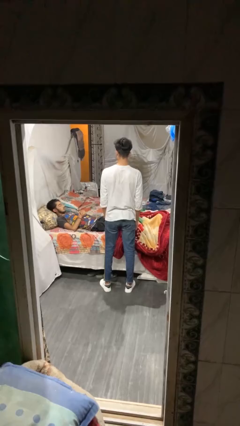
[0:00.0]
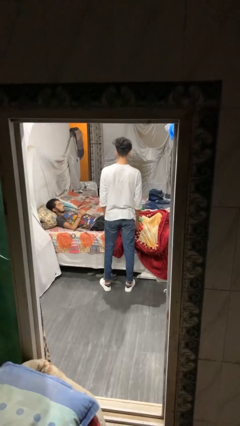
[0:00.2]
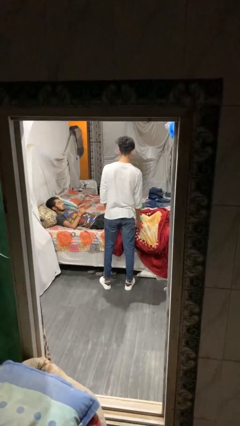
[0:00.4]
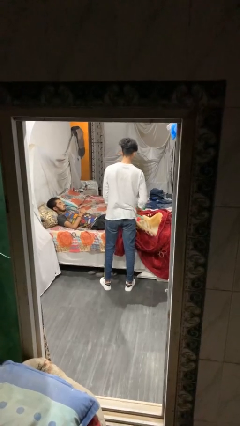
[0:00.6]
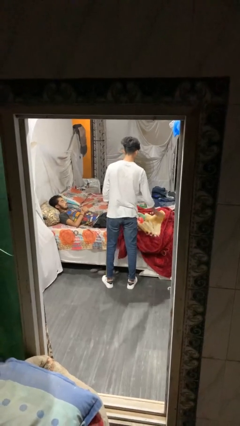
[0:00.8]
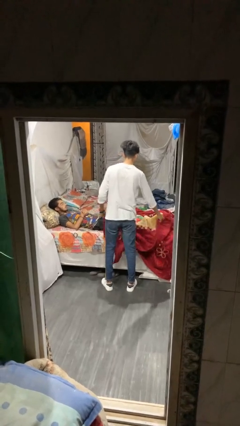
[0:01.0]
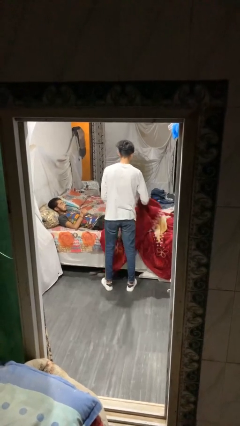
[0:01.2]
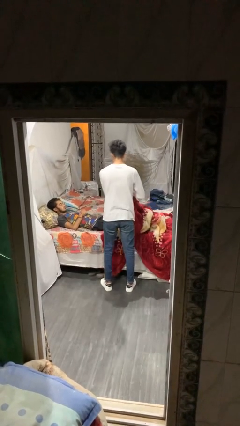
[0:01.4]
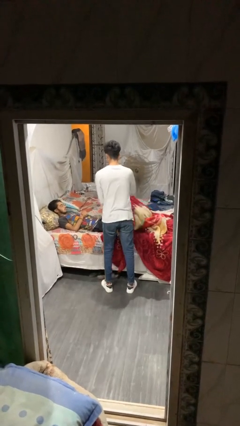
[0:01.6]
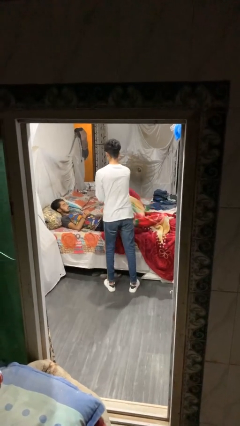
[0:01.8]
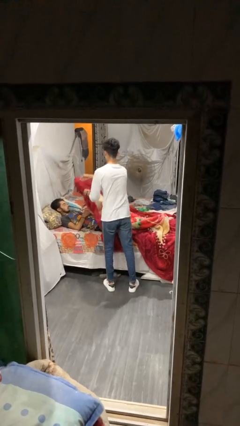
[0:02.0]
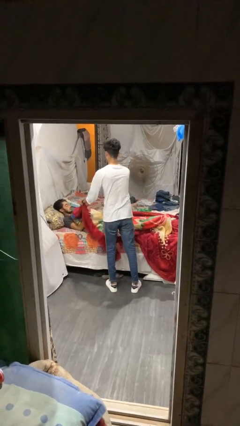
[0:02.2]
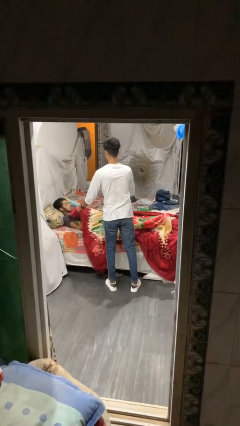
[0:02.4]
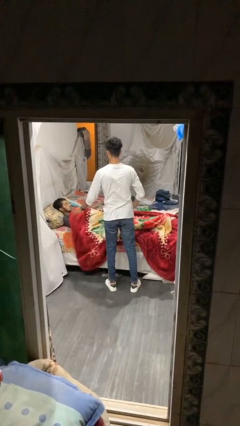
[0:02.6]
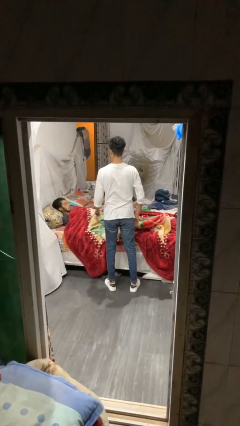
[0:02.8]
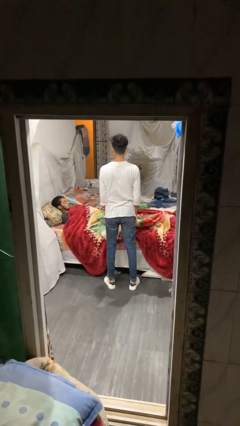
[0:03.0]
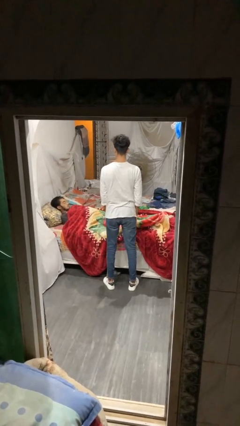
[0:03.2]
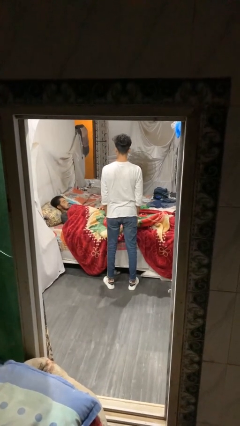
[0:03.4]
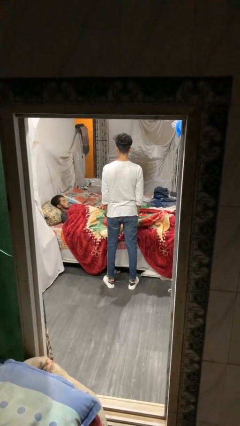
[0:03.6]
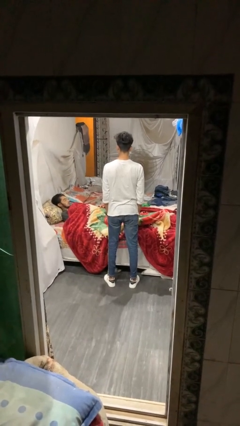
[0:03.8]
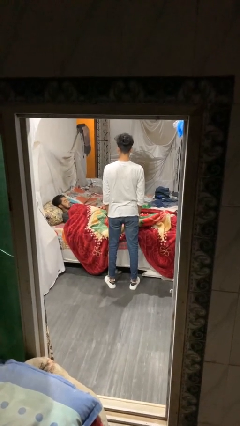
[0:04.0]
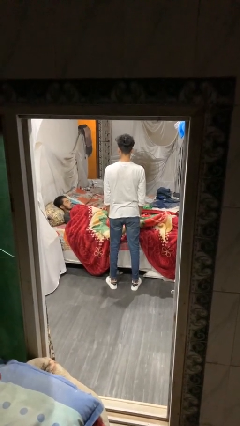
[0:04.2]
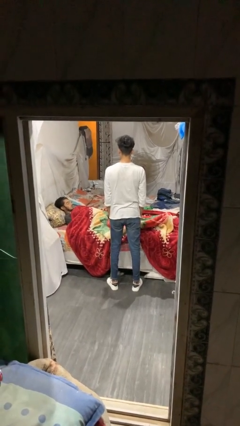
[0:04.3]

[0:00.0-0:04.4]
person covers friend with blanket

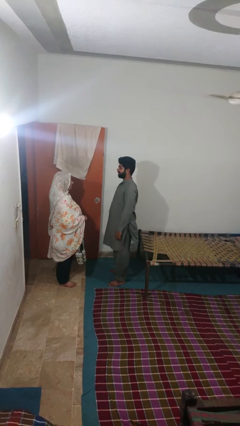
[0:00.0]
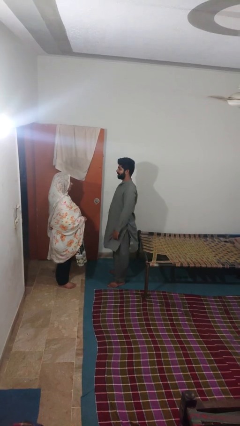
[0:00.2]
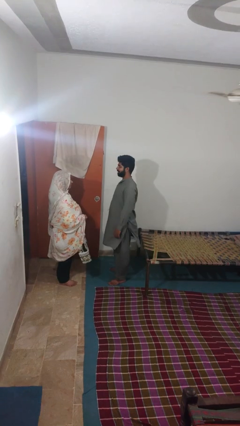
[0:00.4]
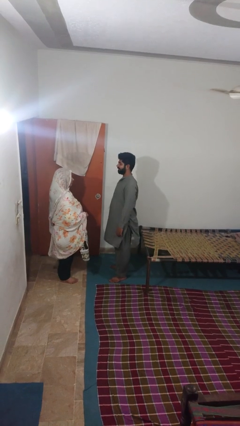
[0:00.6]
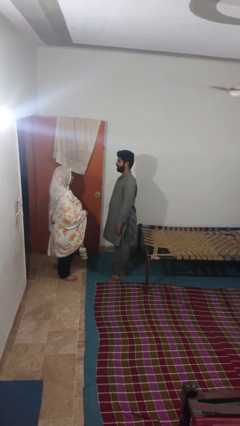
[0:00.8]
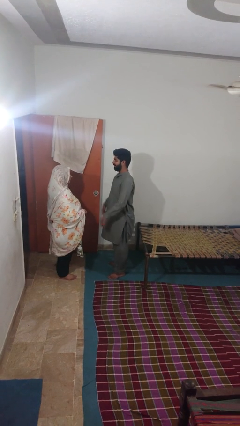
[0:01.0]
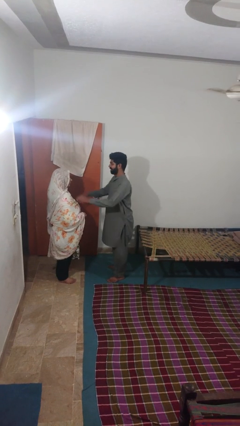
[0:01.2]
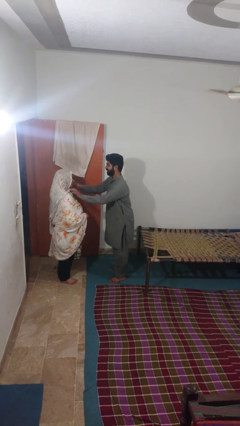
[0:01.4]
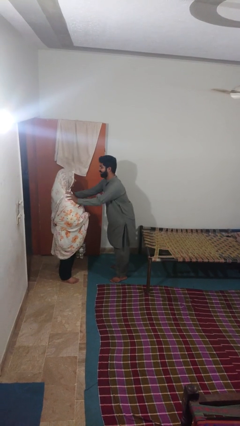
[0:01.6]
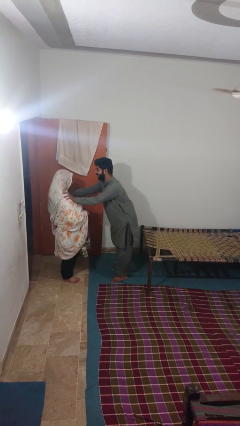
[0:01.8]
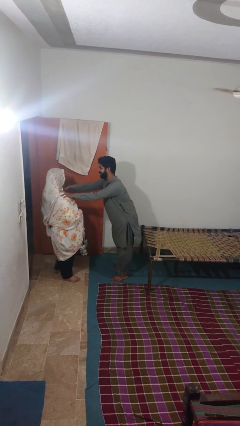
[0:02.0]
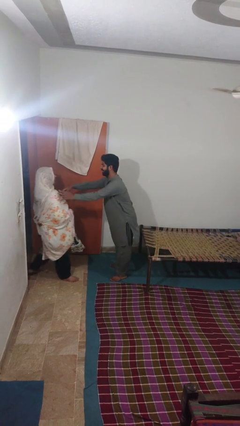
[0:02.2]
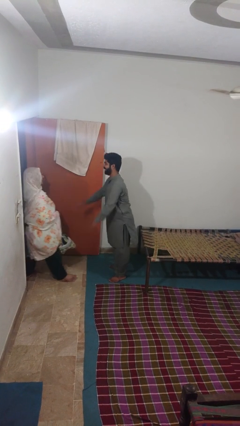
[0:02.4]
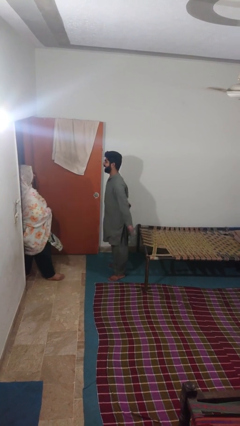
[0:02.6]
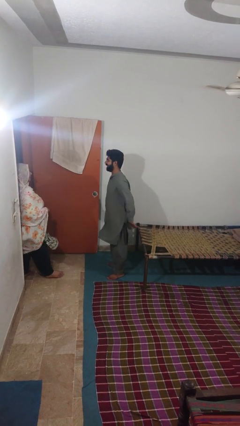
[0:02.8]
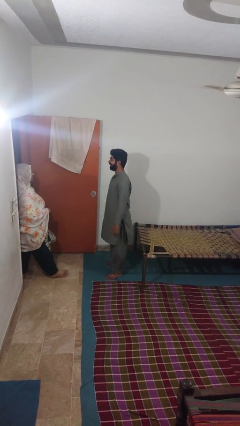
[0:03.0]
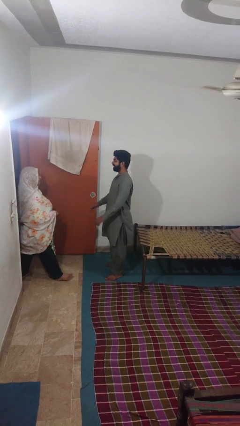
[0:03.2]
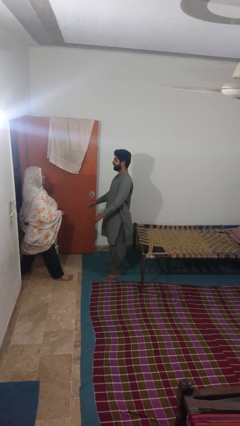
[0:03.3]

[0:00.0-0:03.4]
person shoves person

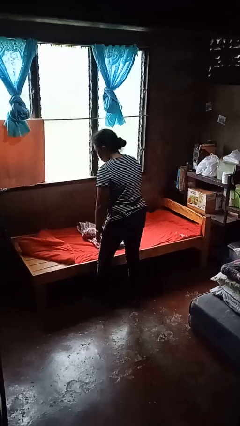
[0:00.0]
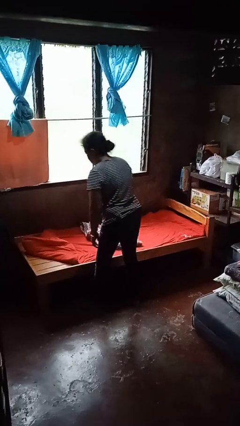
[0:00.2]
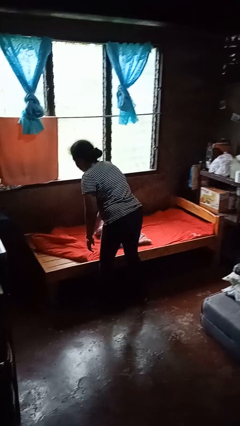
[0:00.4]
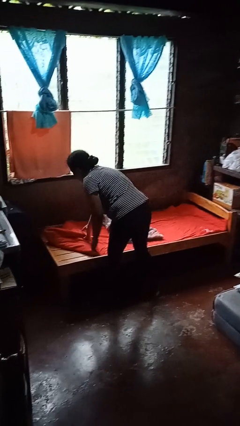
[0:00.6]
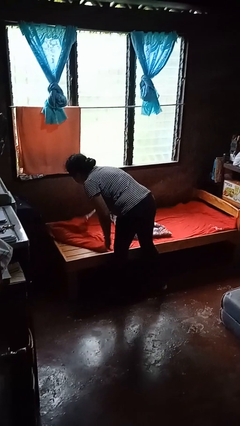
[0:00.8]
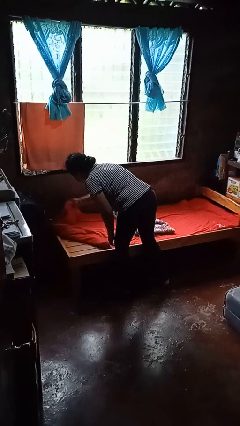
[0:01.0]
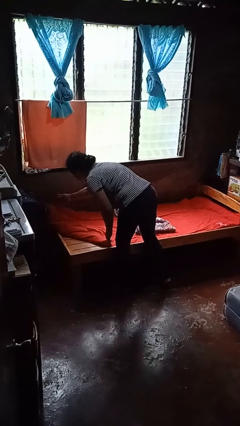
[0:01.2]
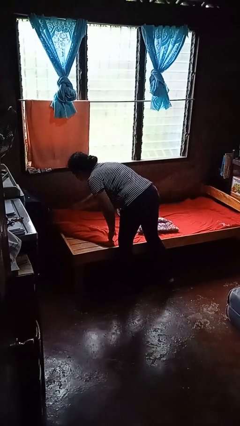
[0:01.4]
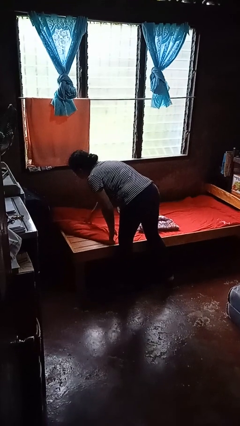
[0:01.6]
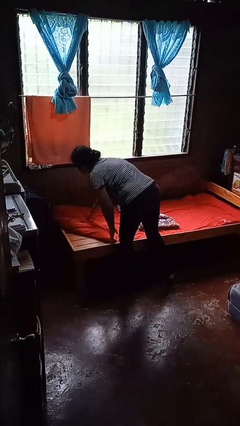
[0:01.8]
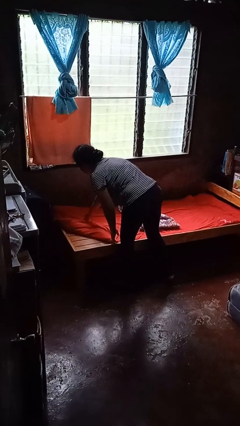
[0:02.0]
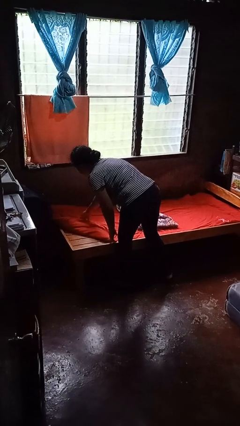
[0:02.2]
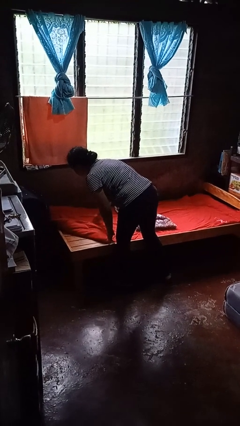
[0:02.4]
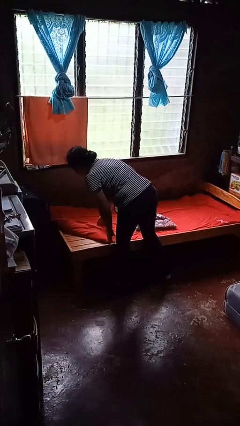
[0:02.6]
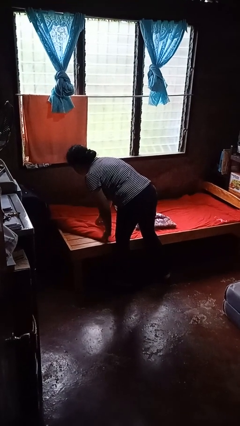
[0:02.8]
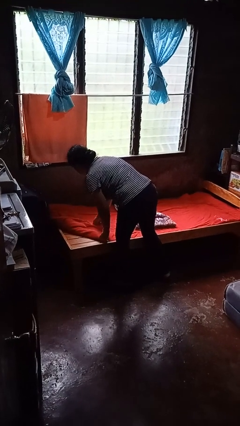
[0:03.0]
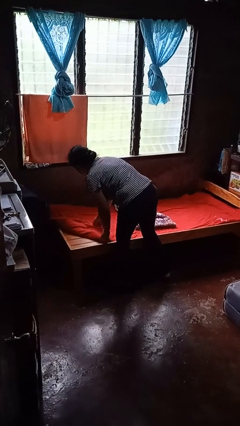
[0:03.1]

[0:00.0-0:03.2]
person makes bed

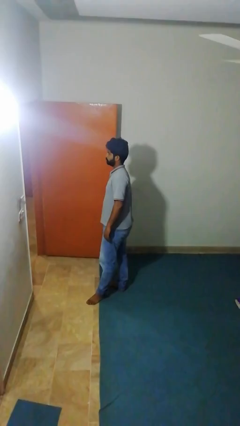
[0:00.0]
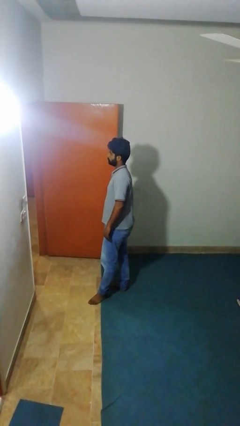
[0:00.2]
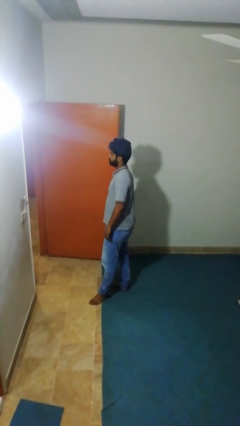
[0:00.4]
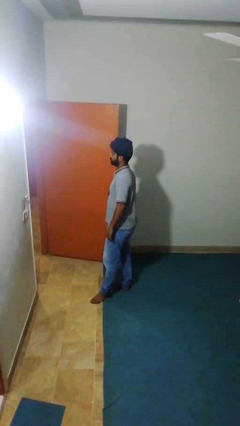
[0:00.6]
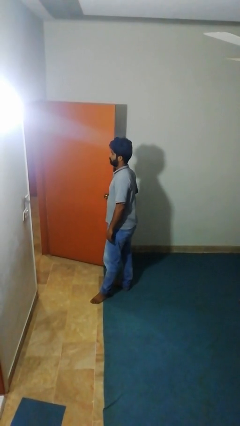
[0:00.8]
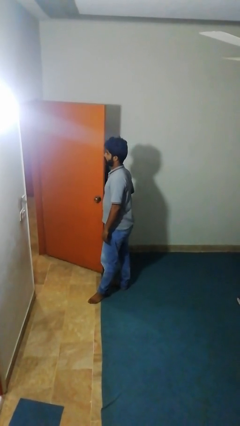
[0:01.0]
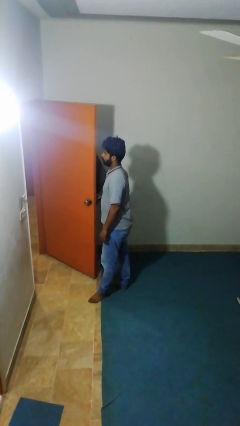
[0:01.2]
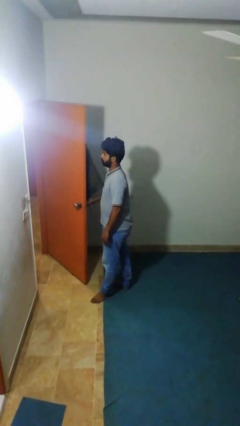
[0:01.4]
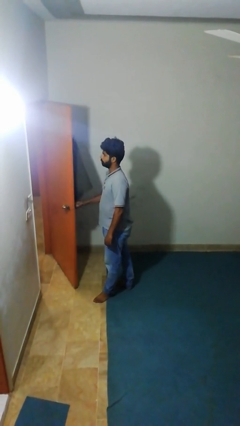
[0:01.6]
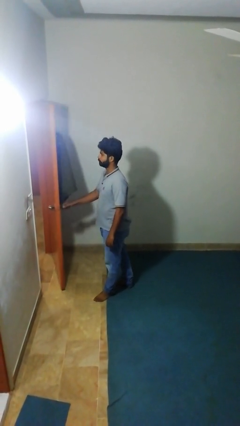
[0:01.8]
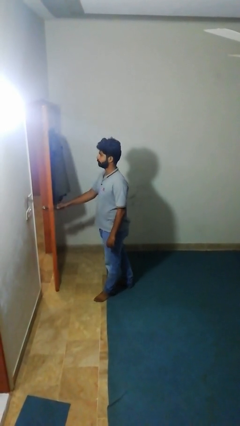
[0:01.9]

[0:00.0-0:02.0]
person closes facility door

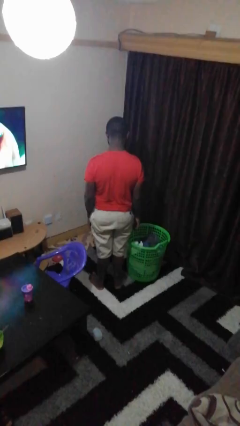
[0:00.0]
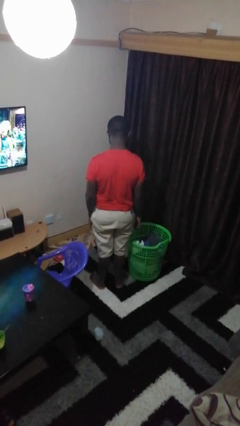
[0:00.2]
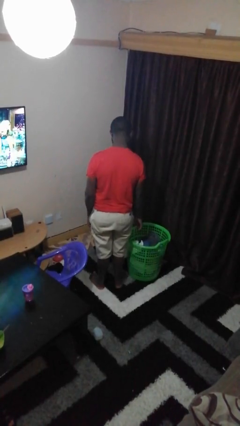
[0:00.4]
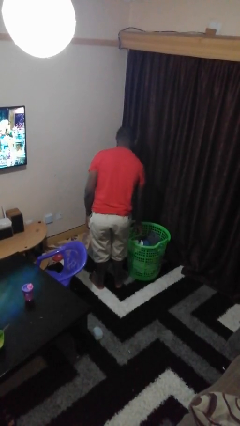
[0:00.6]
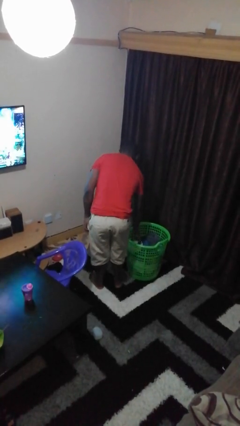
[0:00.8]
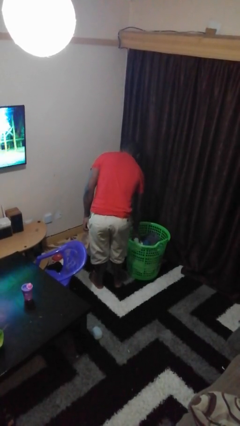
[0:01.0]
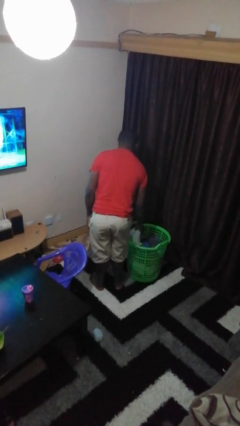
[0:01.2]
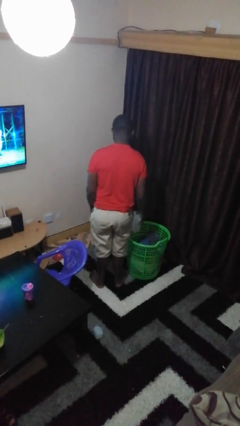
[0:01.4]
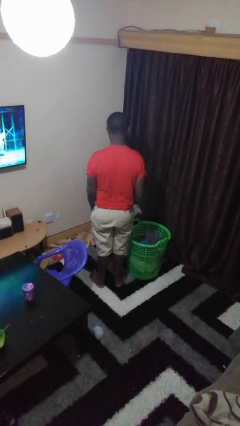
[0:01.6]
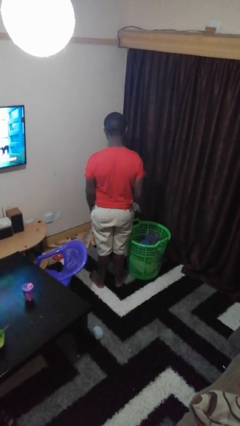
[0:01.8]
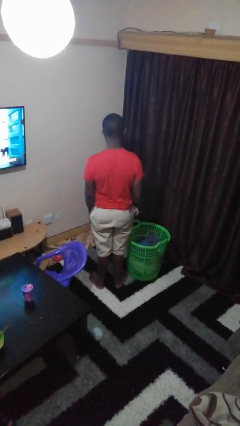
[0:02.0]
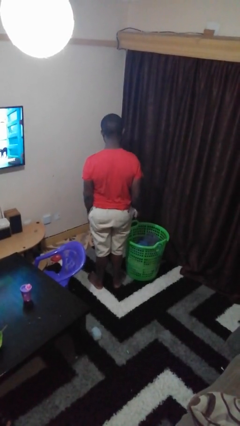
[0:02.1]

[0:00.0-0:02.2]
person takes object from basket

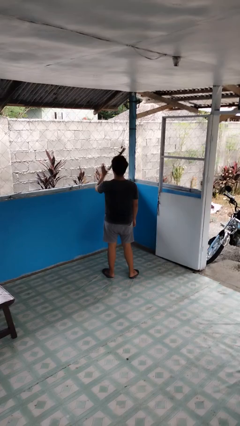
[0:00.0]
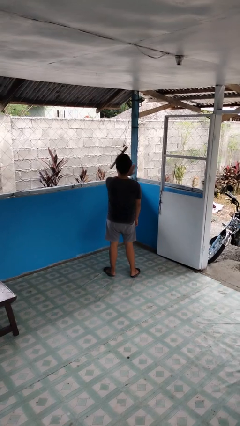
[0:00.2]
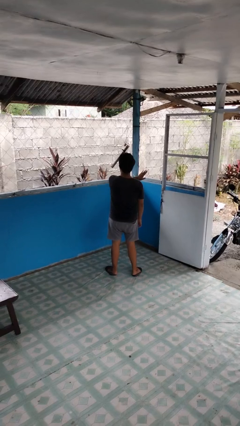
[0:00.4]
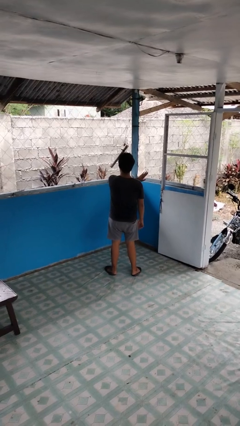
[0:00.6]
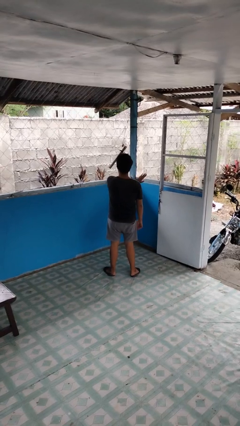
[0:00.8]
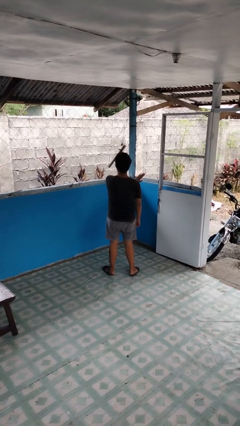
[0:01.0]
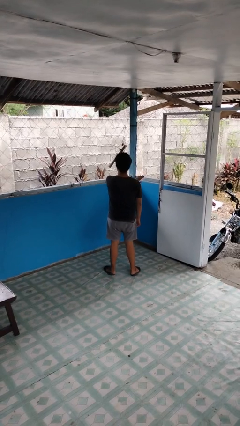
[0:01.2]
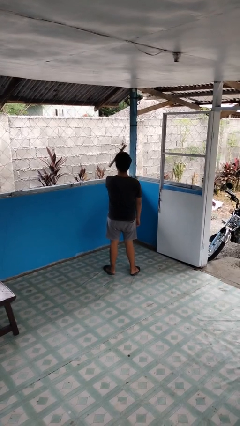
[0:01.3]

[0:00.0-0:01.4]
person gestures swipe right

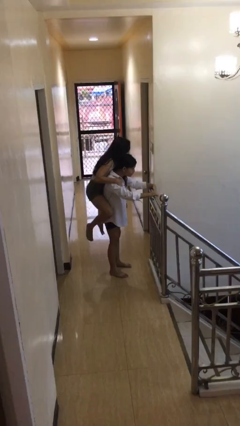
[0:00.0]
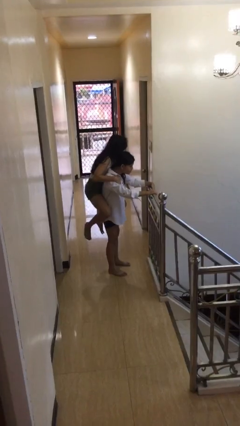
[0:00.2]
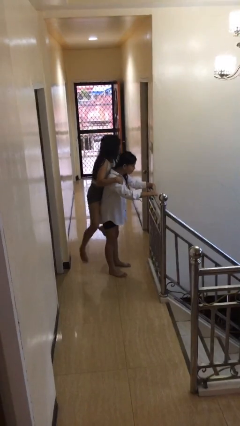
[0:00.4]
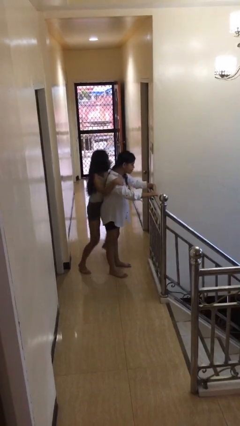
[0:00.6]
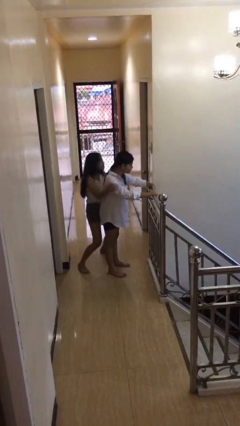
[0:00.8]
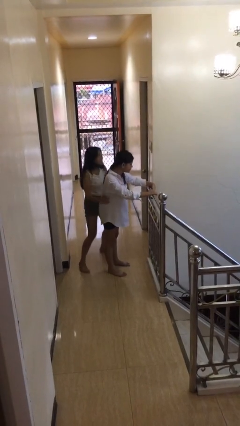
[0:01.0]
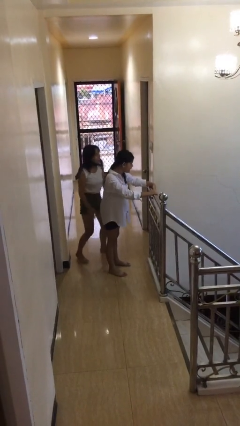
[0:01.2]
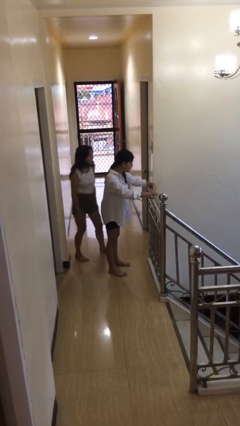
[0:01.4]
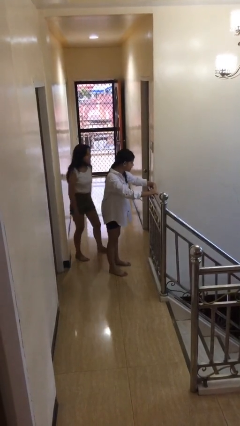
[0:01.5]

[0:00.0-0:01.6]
person puts down person
